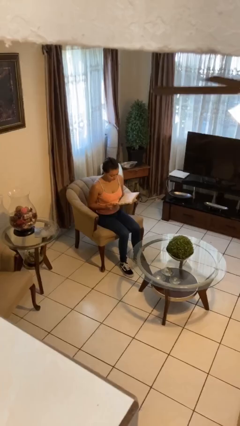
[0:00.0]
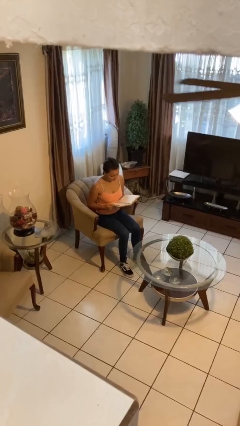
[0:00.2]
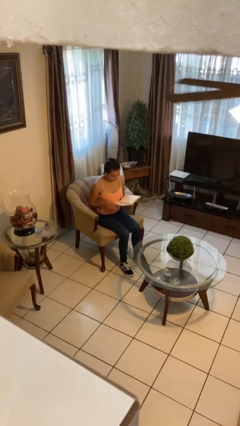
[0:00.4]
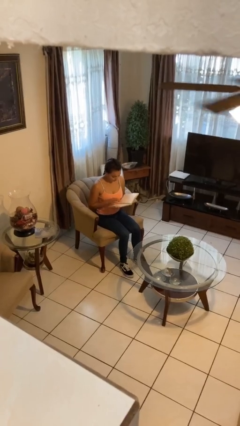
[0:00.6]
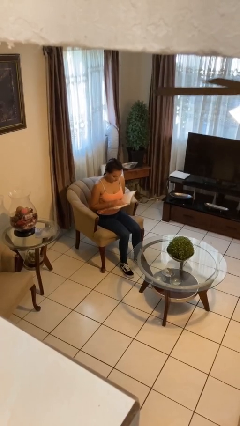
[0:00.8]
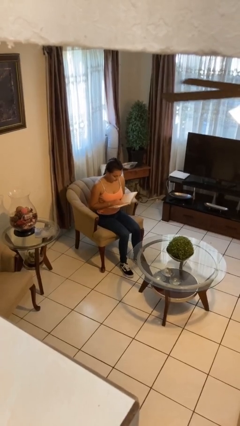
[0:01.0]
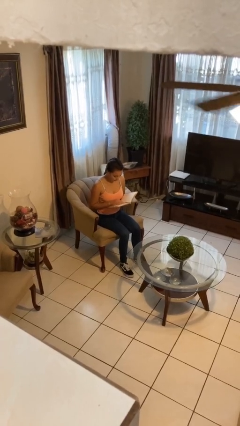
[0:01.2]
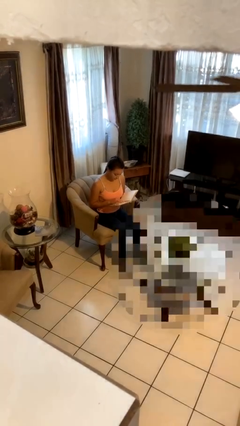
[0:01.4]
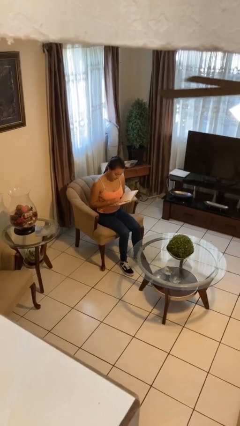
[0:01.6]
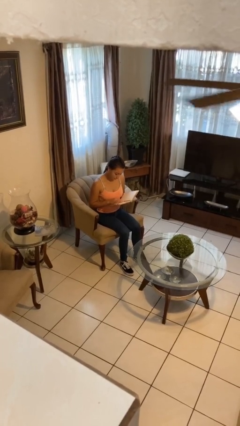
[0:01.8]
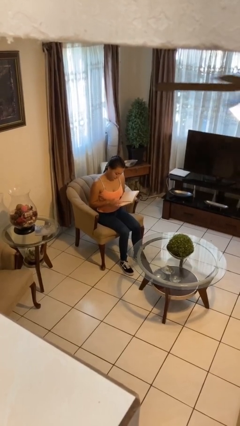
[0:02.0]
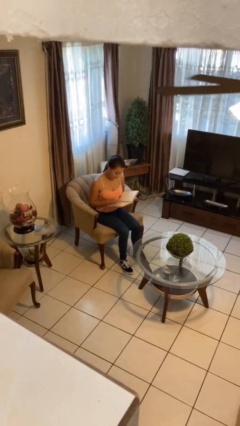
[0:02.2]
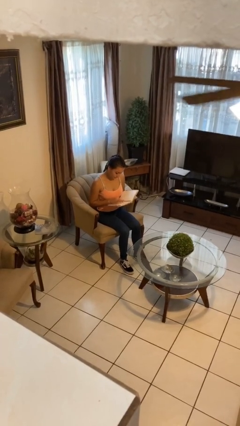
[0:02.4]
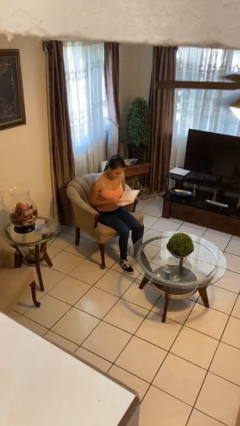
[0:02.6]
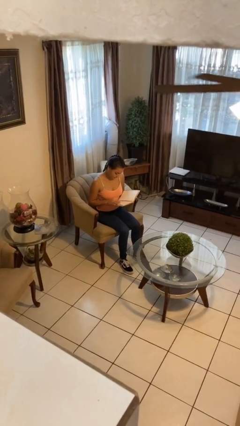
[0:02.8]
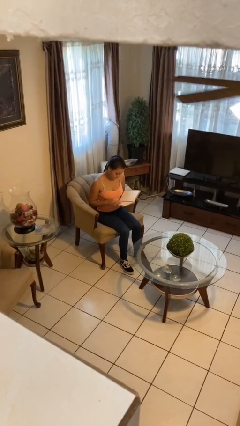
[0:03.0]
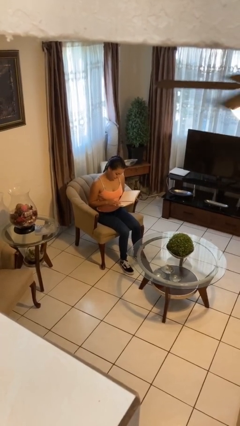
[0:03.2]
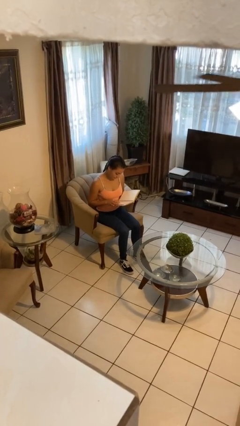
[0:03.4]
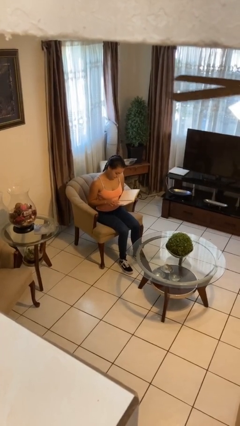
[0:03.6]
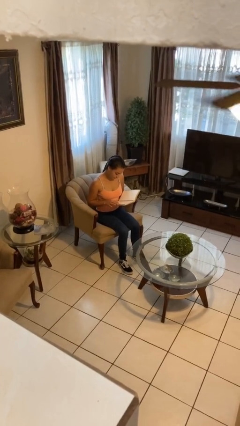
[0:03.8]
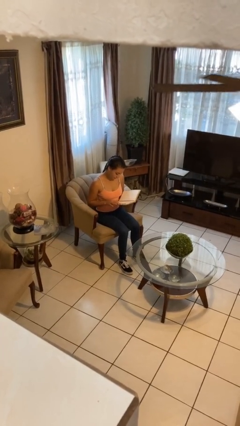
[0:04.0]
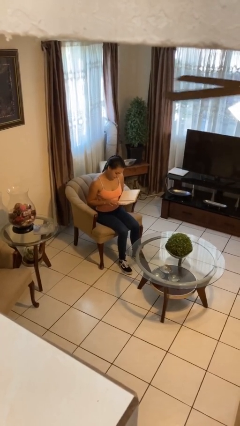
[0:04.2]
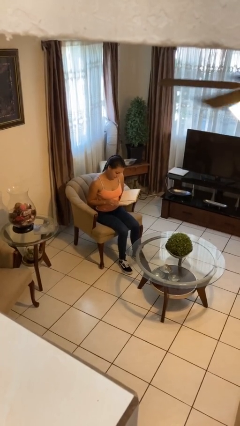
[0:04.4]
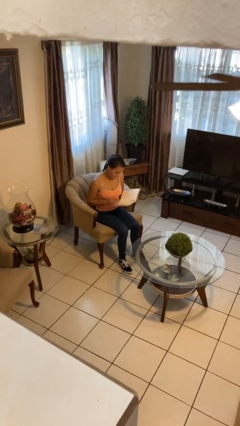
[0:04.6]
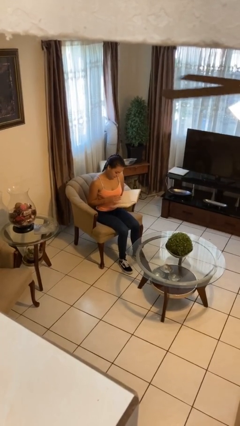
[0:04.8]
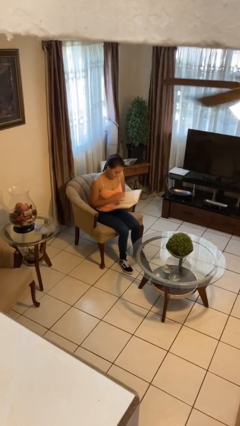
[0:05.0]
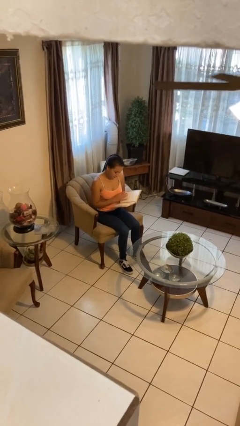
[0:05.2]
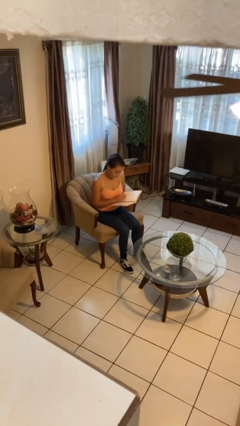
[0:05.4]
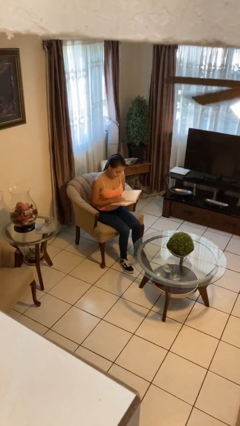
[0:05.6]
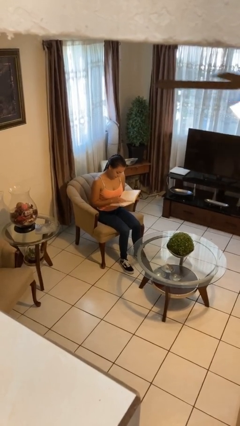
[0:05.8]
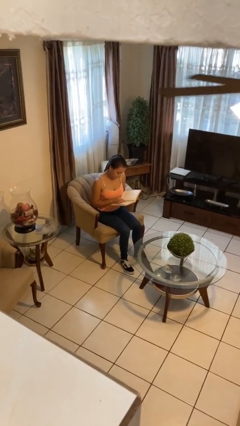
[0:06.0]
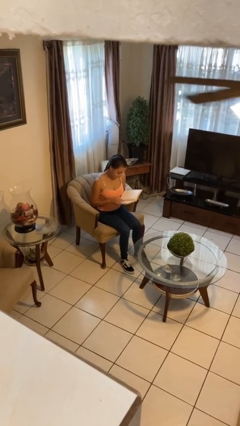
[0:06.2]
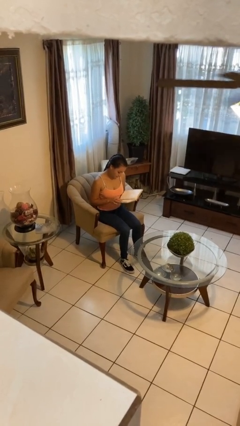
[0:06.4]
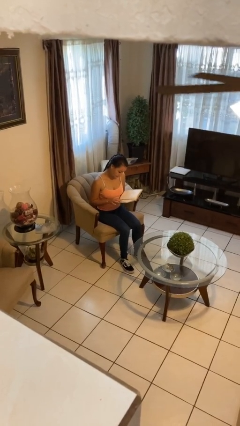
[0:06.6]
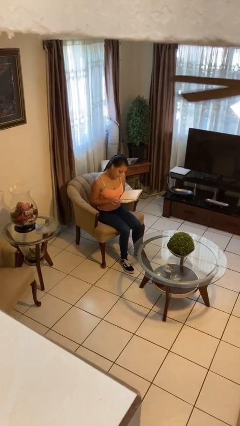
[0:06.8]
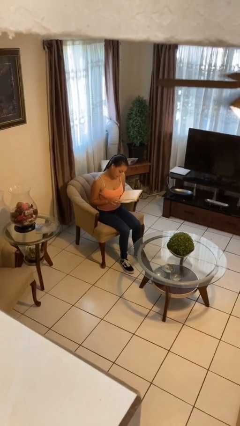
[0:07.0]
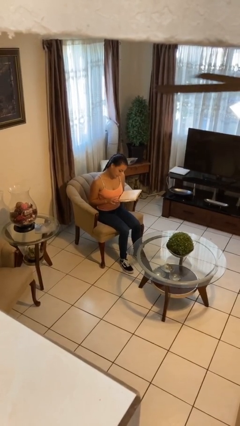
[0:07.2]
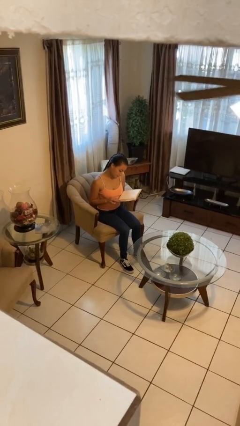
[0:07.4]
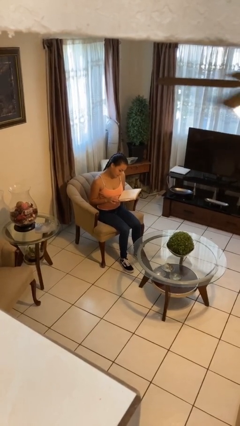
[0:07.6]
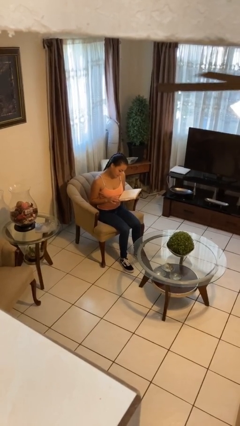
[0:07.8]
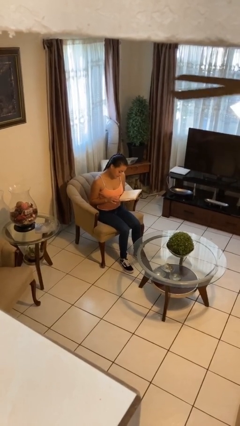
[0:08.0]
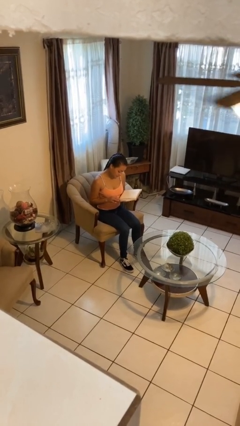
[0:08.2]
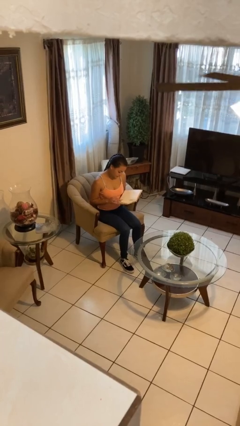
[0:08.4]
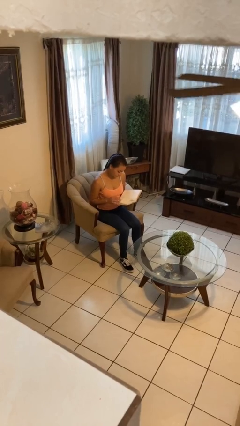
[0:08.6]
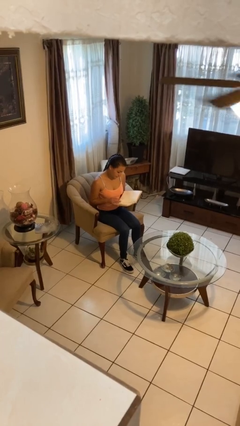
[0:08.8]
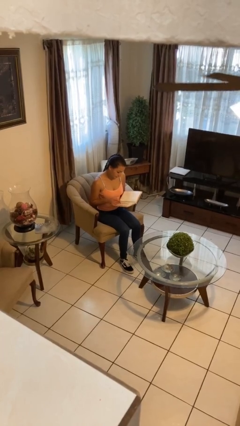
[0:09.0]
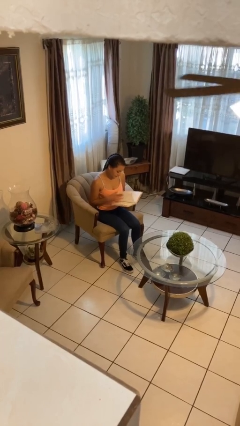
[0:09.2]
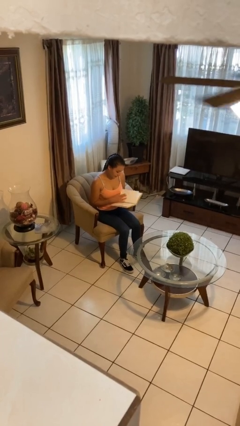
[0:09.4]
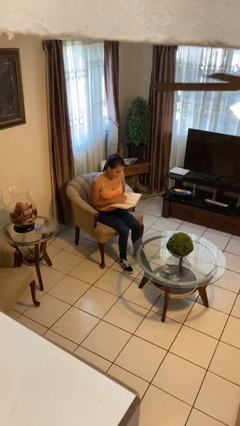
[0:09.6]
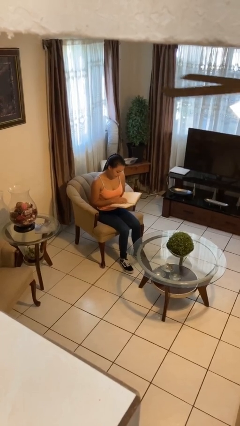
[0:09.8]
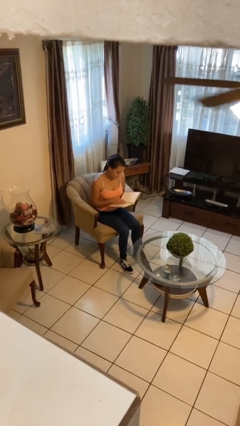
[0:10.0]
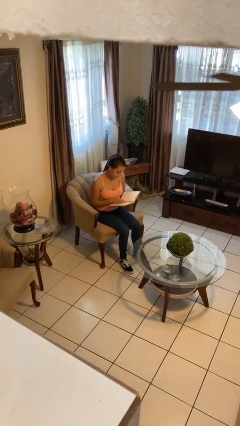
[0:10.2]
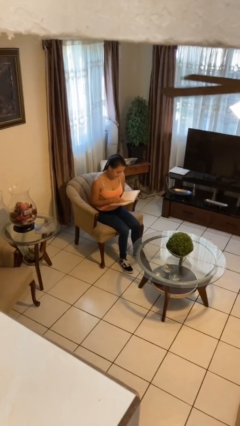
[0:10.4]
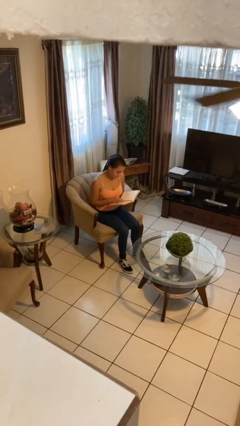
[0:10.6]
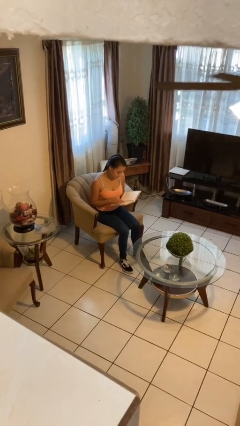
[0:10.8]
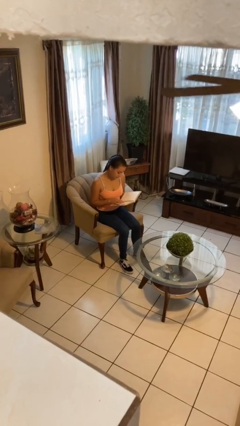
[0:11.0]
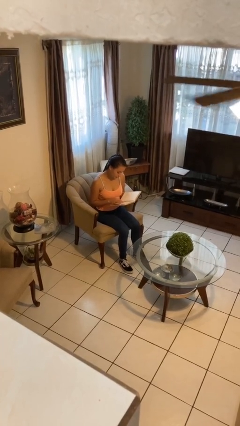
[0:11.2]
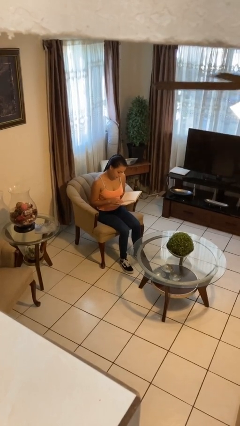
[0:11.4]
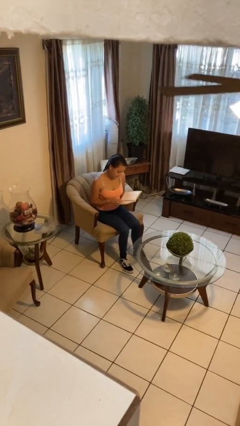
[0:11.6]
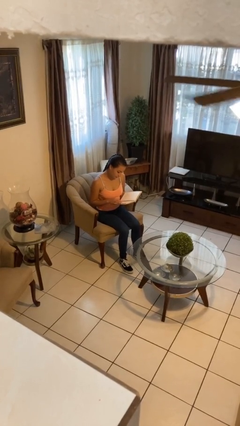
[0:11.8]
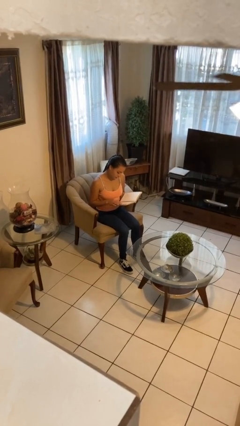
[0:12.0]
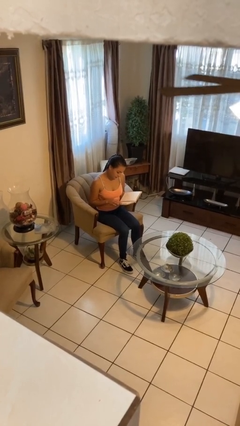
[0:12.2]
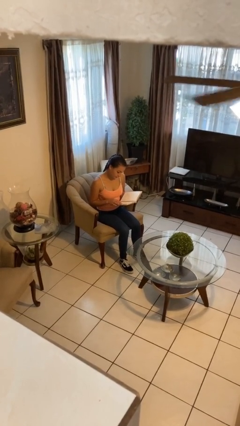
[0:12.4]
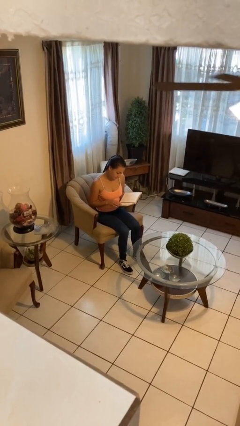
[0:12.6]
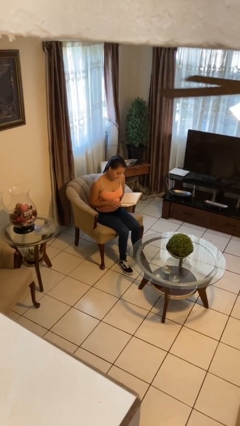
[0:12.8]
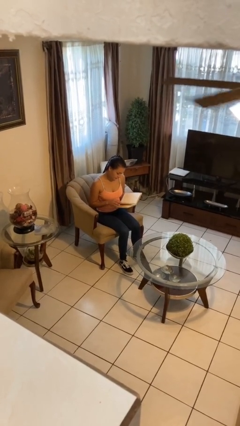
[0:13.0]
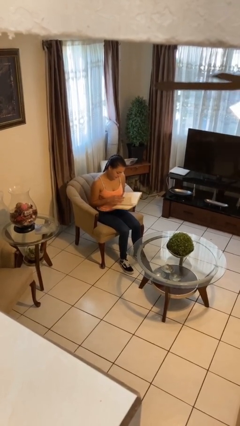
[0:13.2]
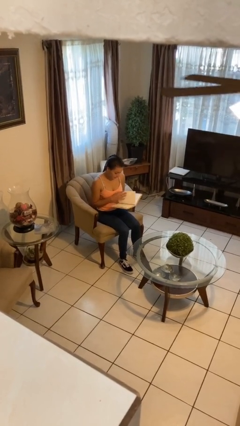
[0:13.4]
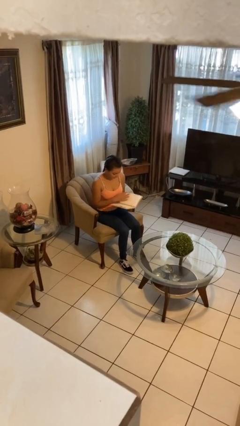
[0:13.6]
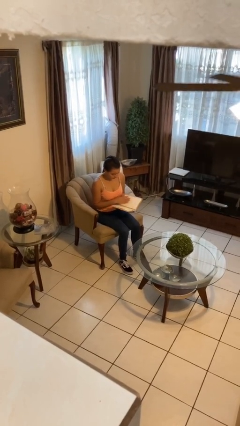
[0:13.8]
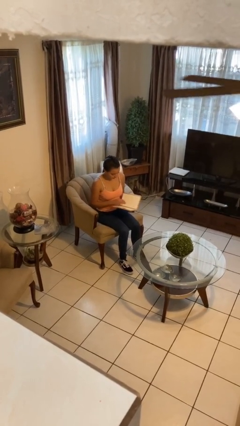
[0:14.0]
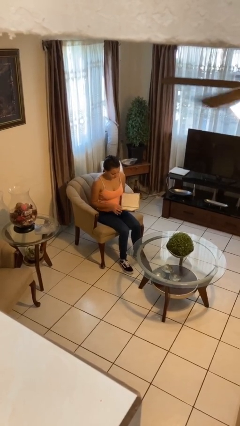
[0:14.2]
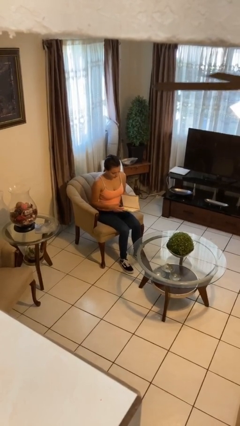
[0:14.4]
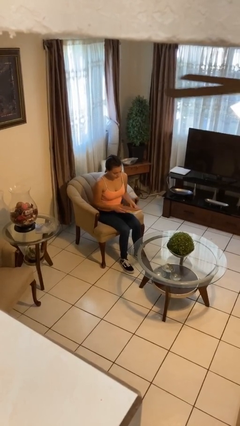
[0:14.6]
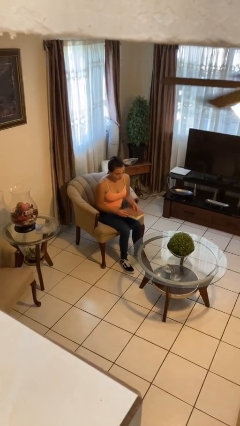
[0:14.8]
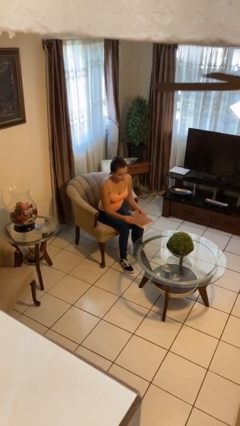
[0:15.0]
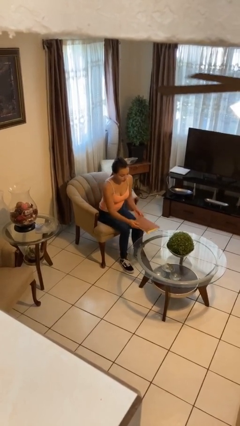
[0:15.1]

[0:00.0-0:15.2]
person reads document

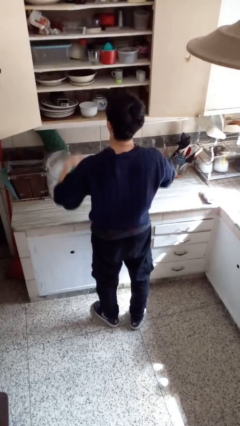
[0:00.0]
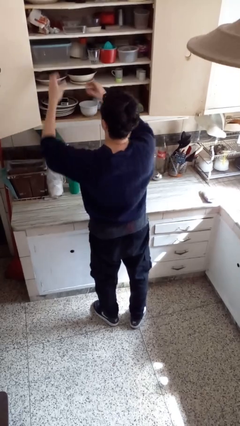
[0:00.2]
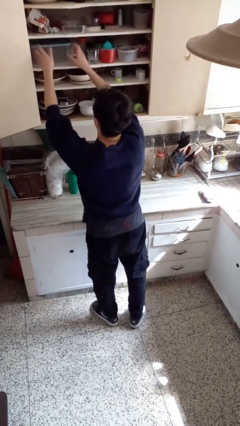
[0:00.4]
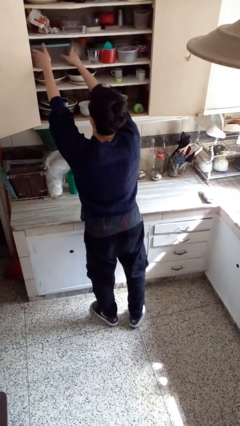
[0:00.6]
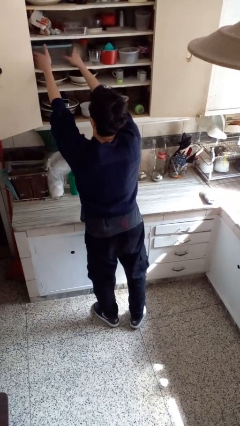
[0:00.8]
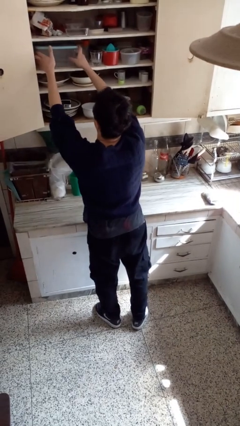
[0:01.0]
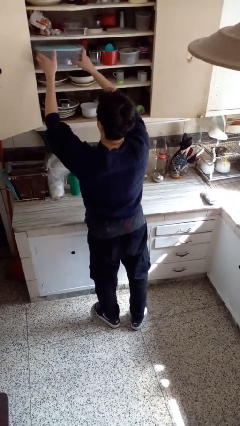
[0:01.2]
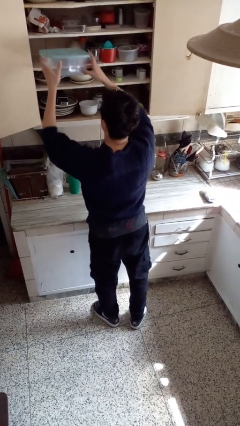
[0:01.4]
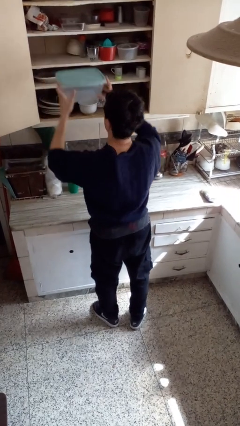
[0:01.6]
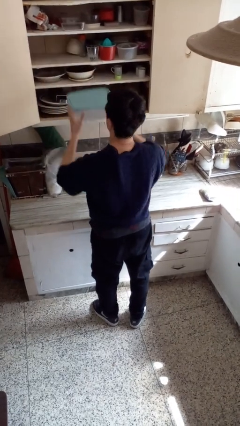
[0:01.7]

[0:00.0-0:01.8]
person picks up object from cabinet

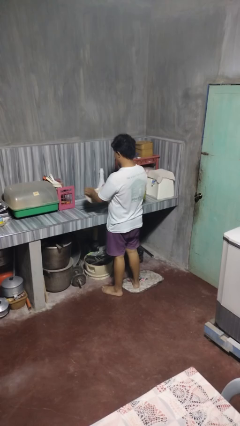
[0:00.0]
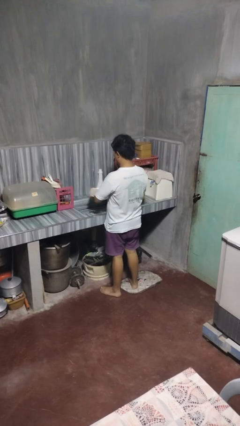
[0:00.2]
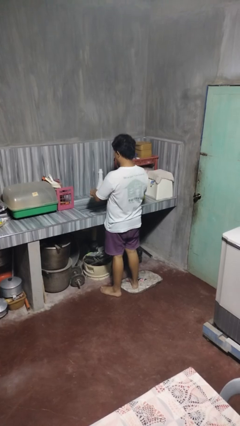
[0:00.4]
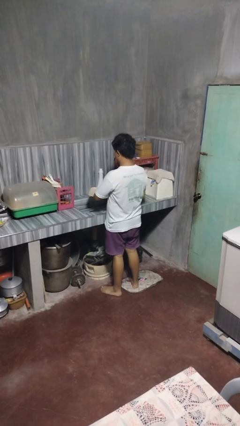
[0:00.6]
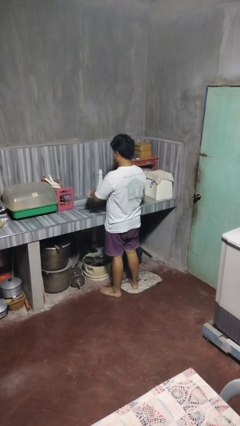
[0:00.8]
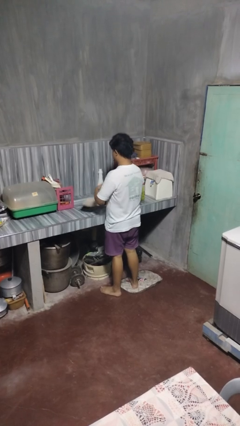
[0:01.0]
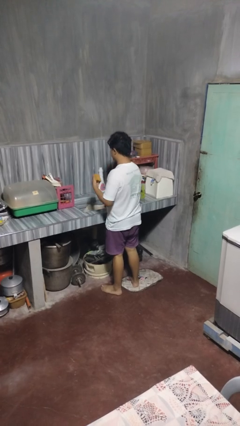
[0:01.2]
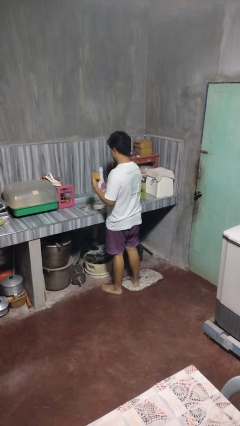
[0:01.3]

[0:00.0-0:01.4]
person washes dish
